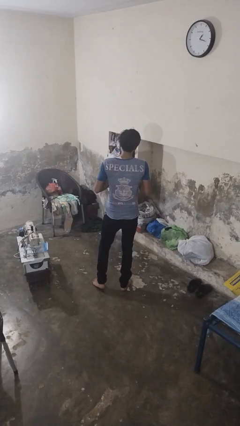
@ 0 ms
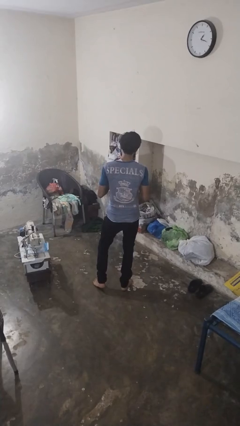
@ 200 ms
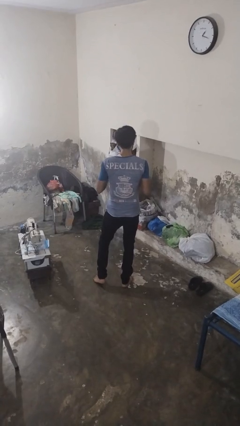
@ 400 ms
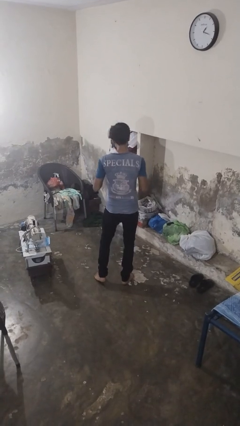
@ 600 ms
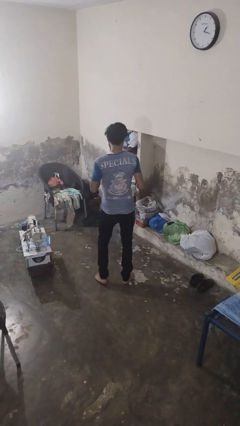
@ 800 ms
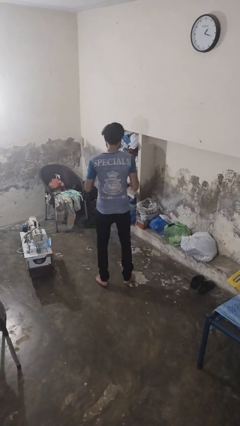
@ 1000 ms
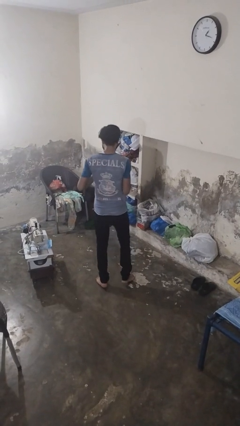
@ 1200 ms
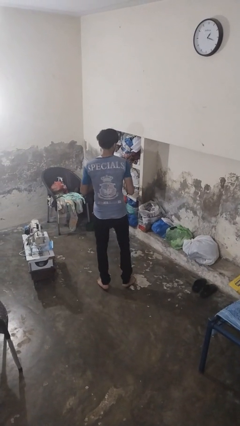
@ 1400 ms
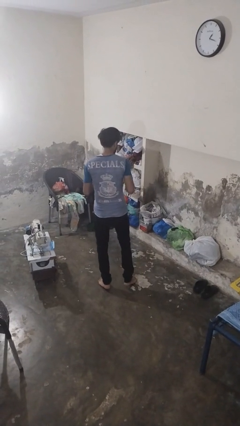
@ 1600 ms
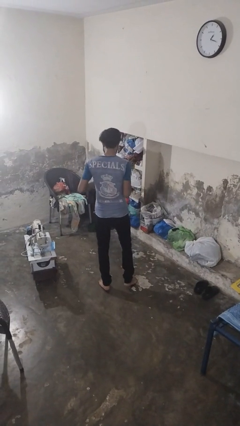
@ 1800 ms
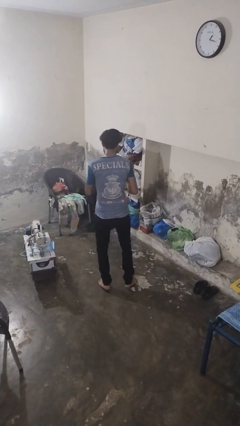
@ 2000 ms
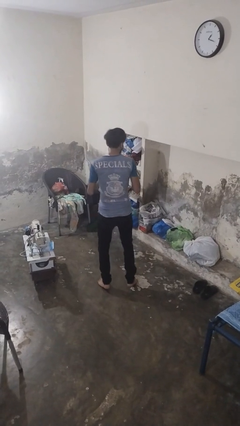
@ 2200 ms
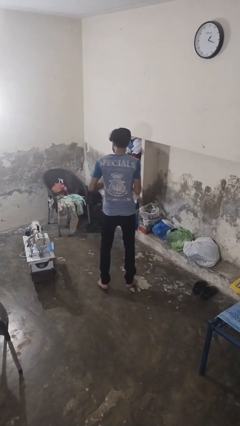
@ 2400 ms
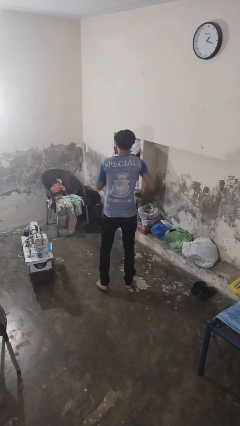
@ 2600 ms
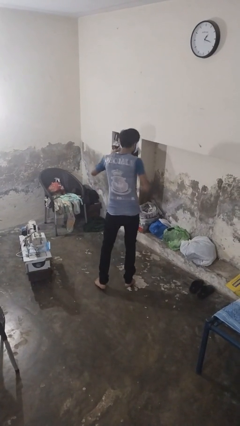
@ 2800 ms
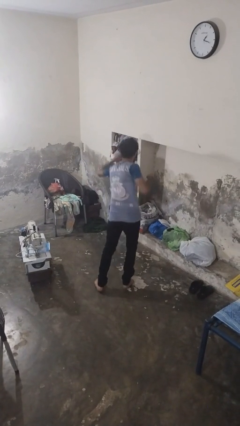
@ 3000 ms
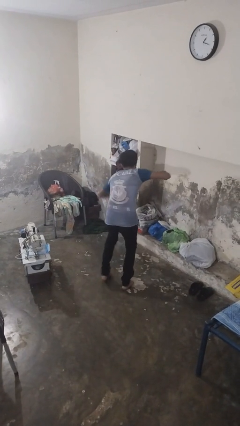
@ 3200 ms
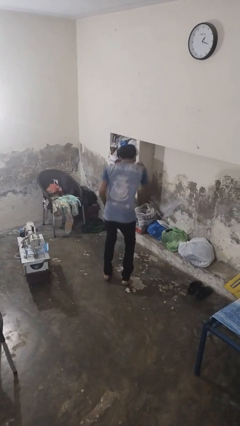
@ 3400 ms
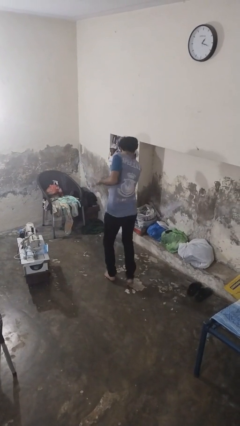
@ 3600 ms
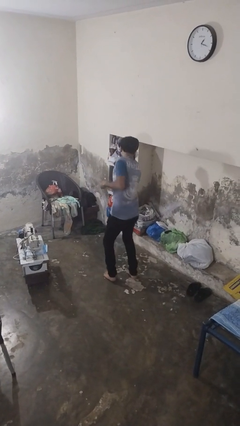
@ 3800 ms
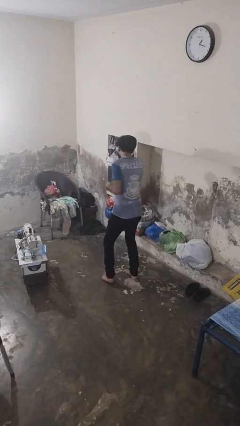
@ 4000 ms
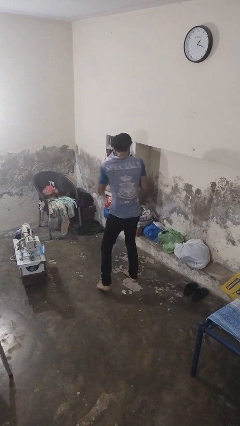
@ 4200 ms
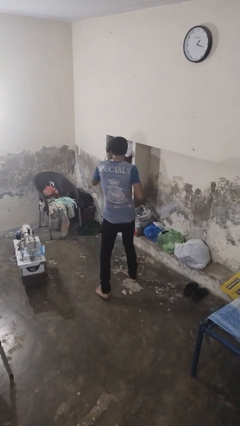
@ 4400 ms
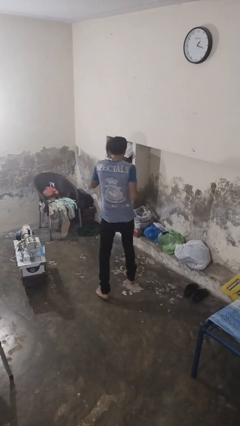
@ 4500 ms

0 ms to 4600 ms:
person dances in place

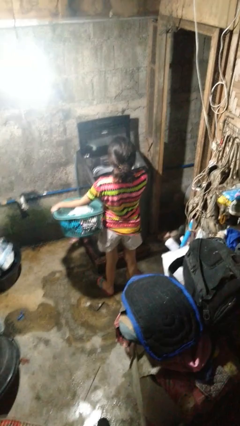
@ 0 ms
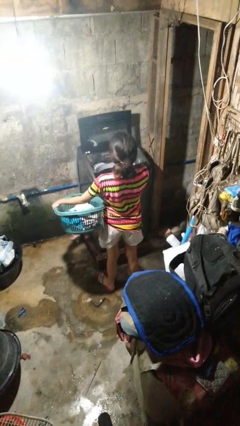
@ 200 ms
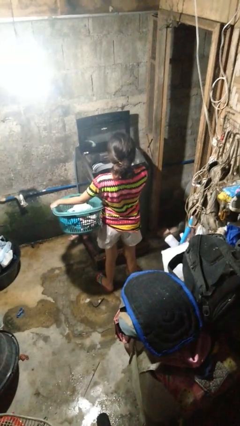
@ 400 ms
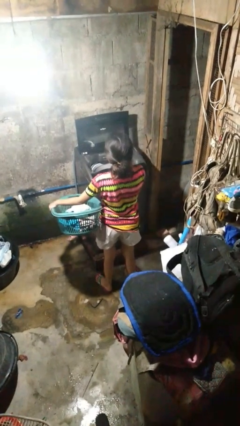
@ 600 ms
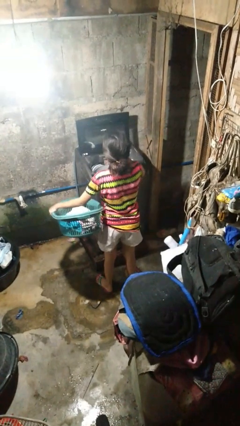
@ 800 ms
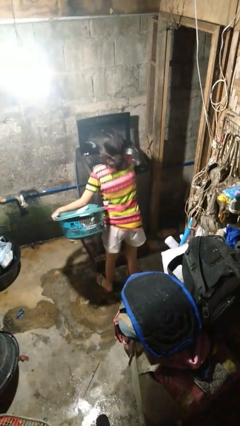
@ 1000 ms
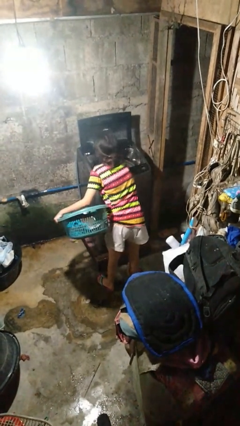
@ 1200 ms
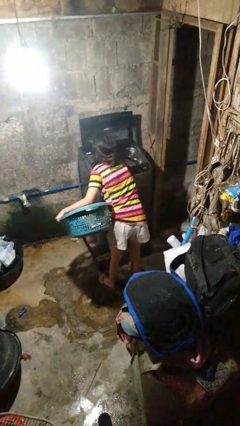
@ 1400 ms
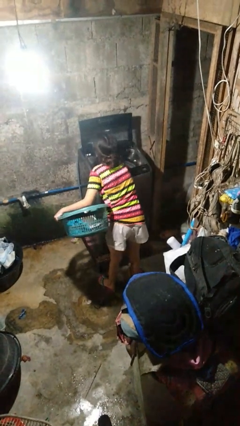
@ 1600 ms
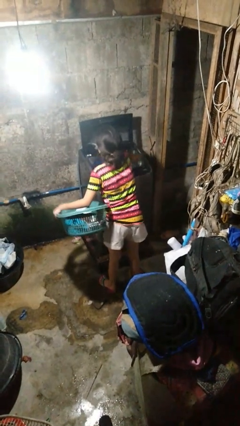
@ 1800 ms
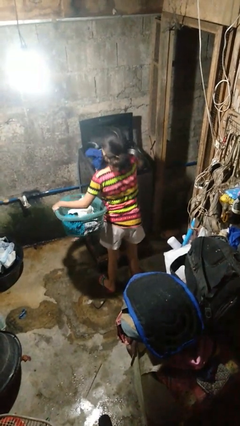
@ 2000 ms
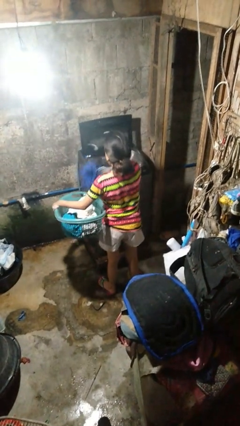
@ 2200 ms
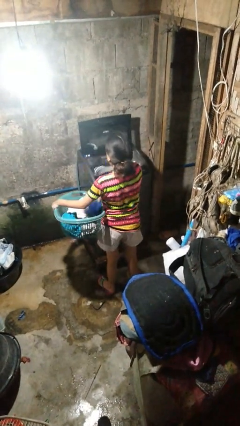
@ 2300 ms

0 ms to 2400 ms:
person unloads clotheswasher

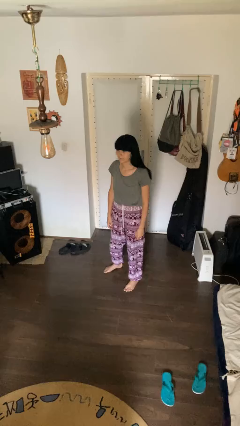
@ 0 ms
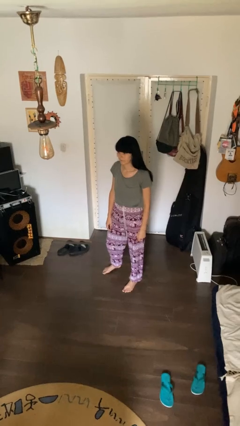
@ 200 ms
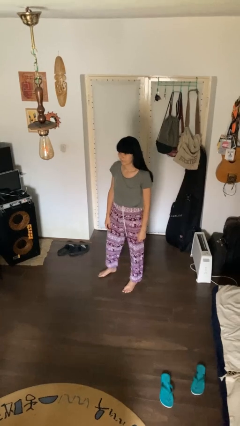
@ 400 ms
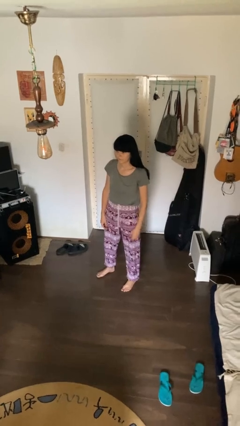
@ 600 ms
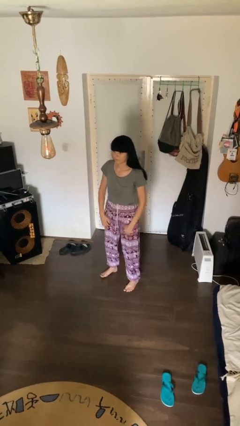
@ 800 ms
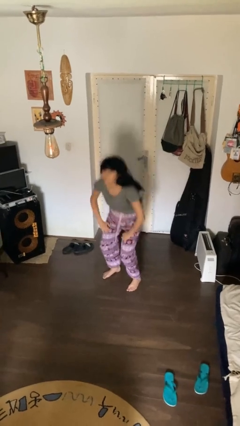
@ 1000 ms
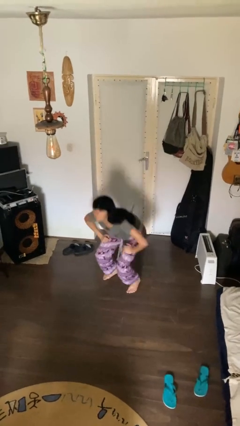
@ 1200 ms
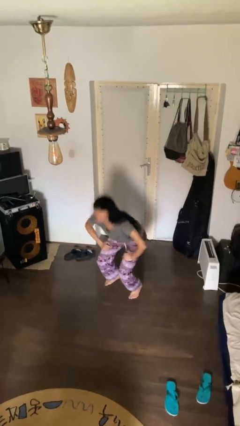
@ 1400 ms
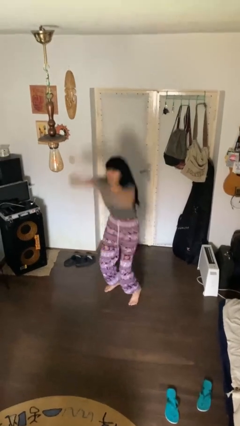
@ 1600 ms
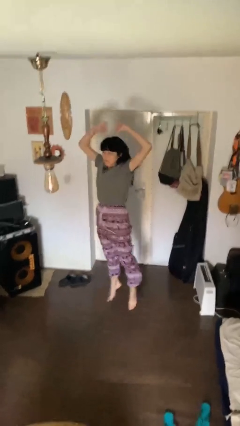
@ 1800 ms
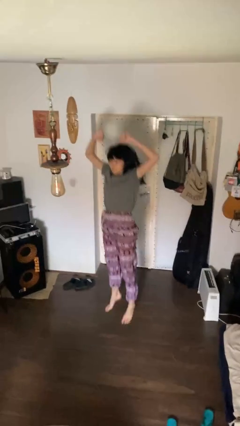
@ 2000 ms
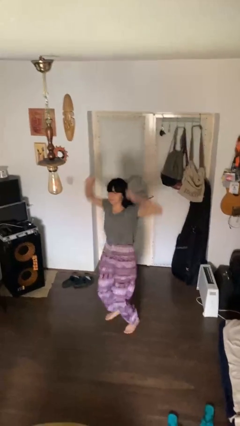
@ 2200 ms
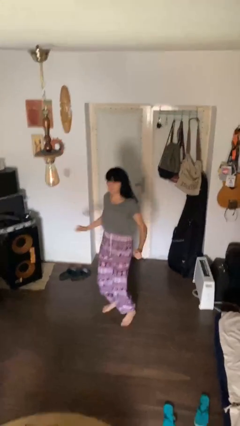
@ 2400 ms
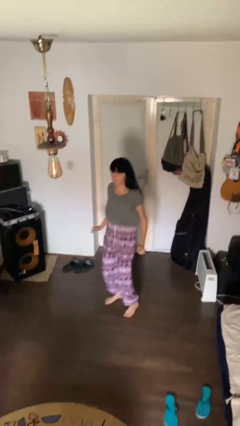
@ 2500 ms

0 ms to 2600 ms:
person jumps

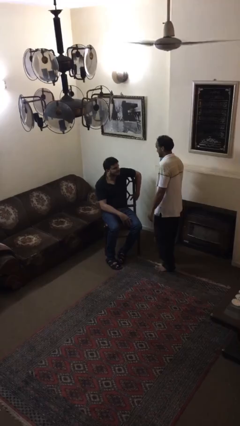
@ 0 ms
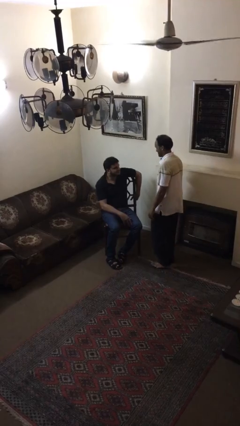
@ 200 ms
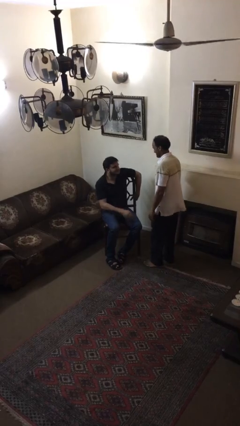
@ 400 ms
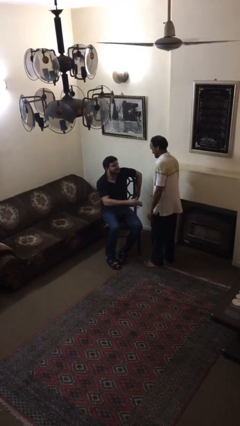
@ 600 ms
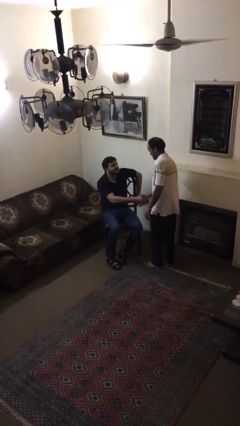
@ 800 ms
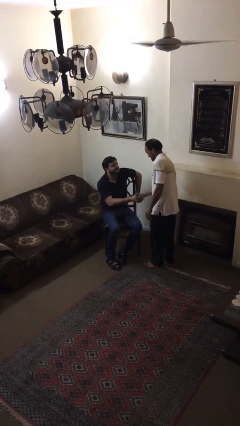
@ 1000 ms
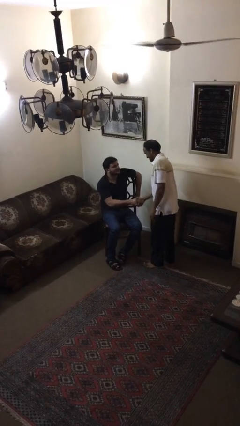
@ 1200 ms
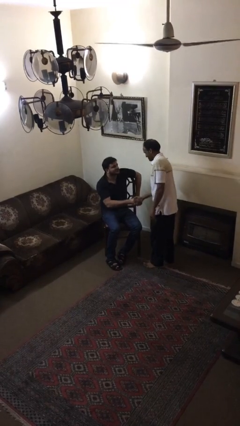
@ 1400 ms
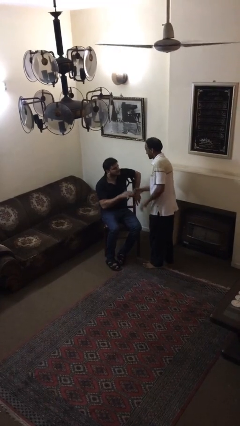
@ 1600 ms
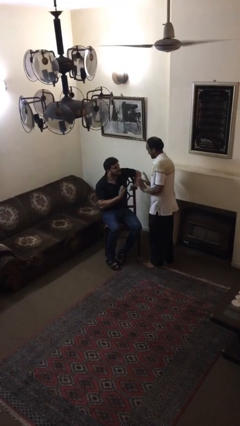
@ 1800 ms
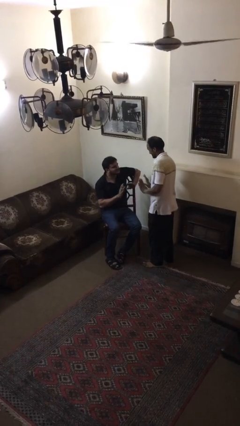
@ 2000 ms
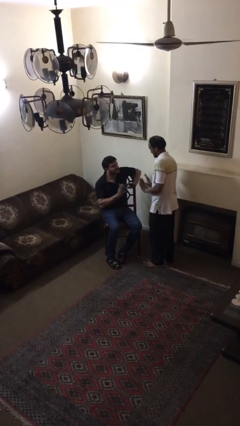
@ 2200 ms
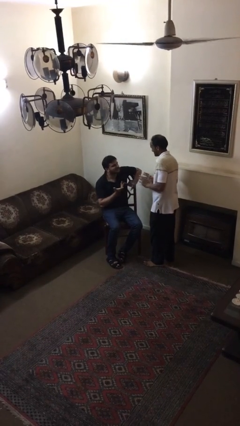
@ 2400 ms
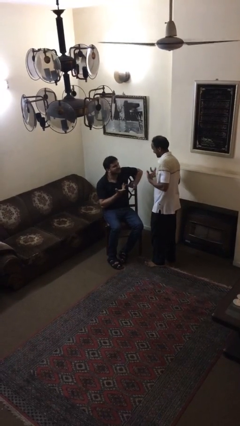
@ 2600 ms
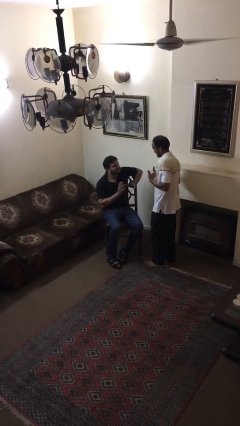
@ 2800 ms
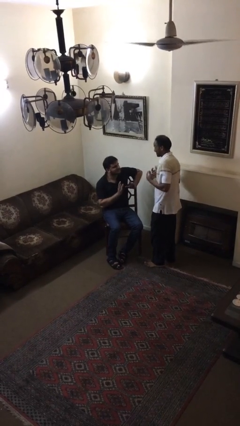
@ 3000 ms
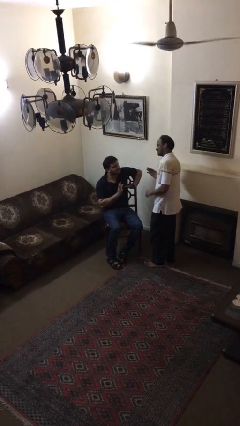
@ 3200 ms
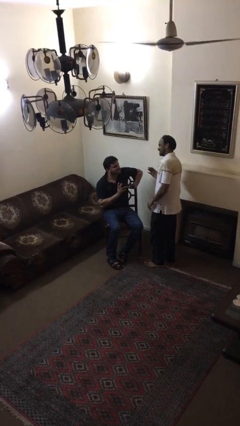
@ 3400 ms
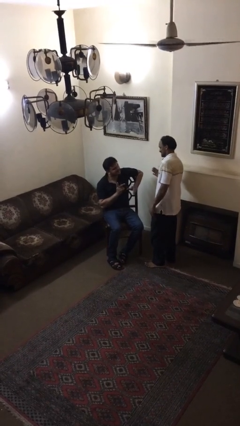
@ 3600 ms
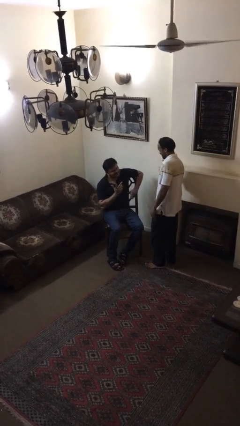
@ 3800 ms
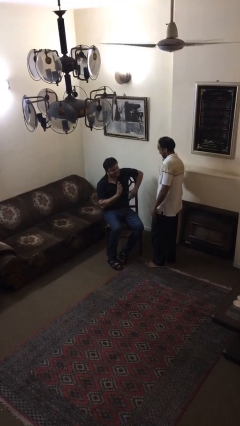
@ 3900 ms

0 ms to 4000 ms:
person shakes hand

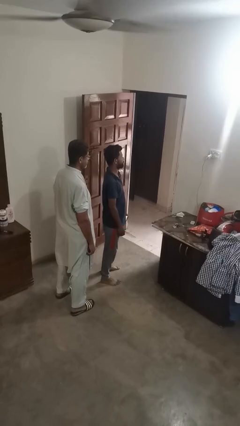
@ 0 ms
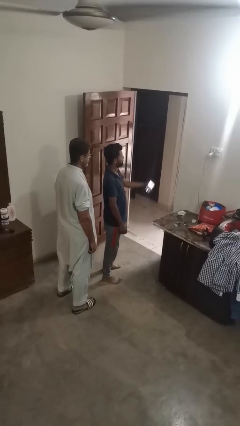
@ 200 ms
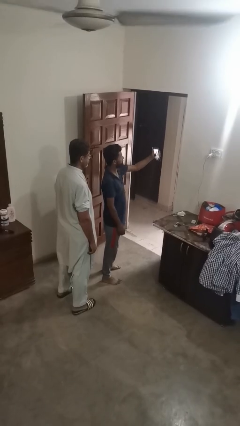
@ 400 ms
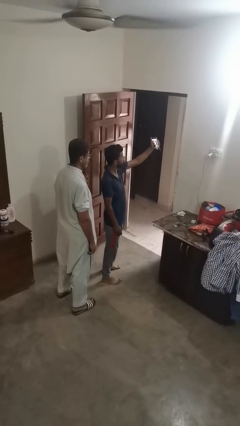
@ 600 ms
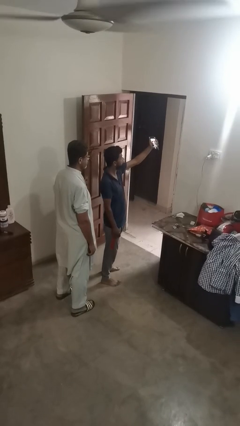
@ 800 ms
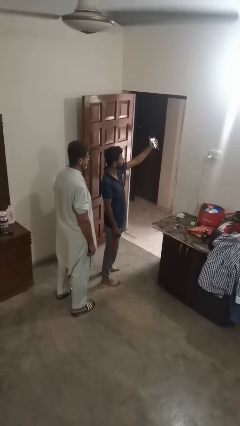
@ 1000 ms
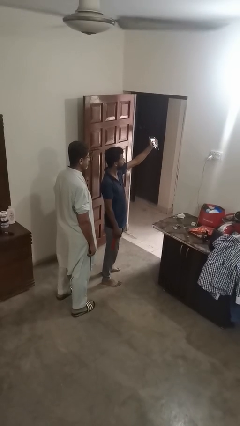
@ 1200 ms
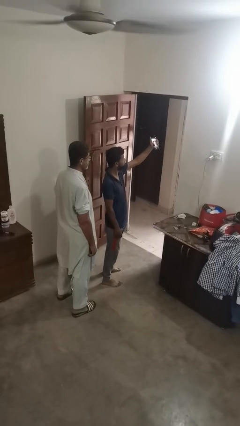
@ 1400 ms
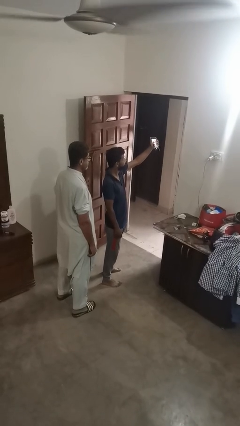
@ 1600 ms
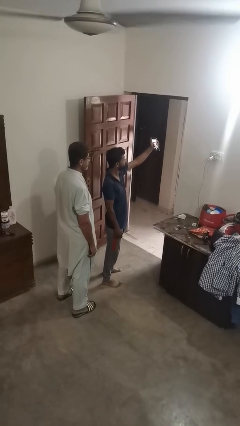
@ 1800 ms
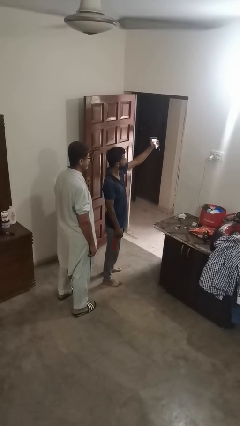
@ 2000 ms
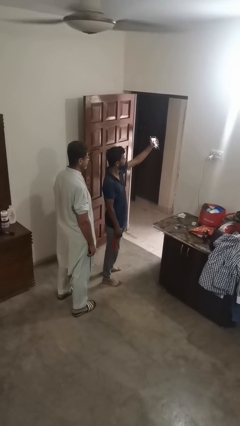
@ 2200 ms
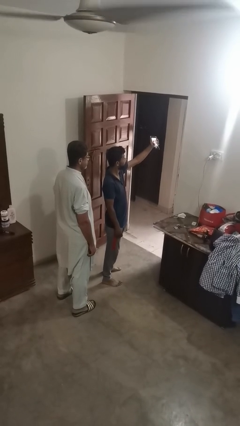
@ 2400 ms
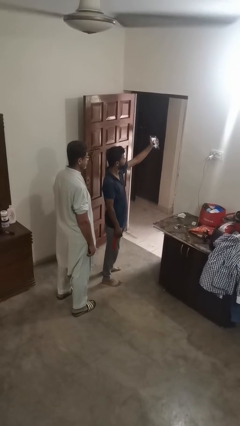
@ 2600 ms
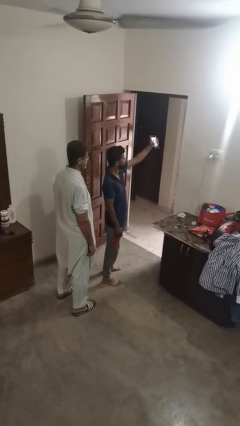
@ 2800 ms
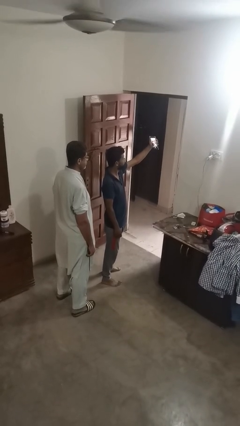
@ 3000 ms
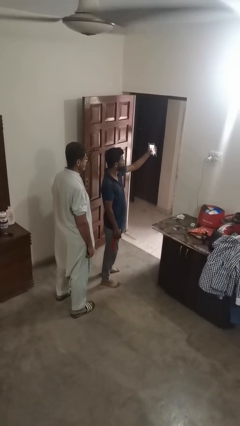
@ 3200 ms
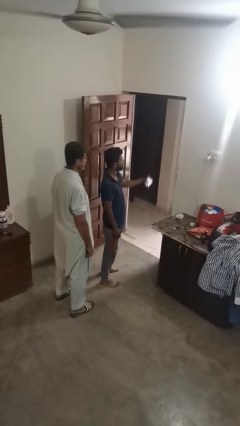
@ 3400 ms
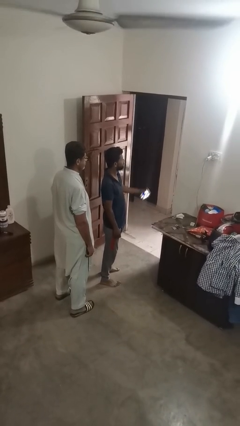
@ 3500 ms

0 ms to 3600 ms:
person takes selfie with person
